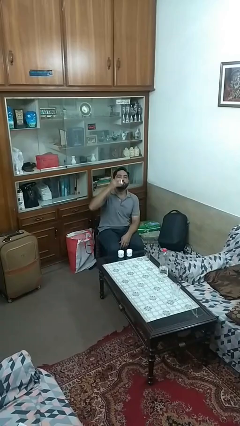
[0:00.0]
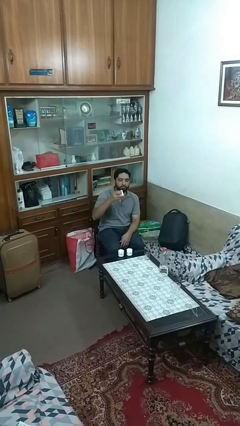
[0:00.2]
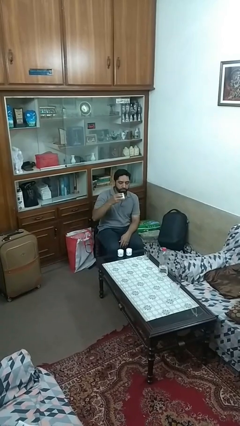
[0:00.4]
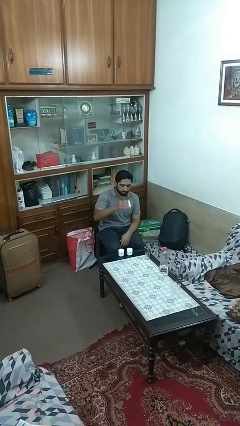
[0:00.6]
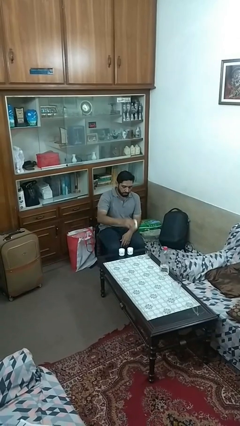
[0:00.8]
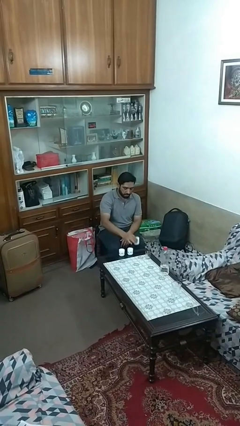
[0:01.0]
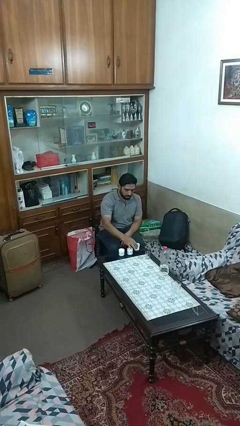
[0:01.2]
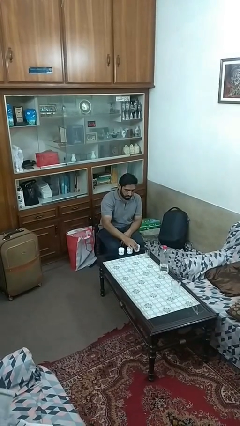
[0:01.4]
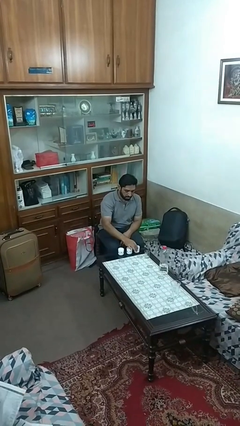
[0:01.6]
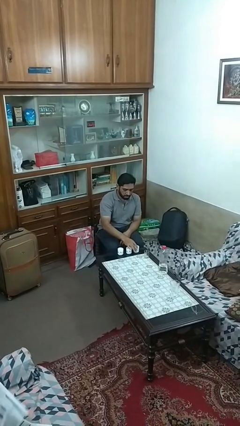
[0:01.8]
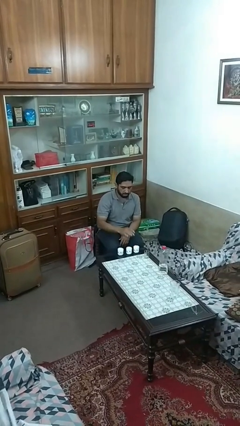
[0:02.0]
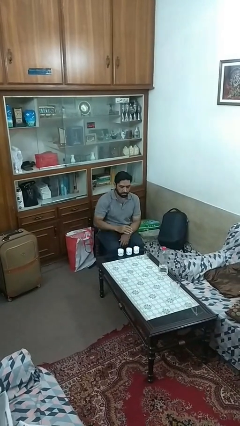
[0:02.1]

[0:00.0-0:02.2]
person puts down object on table

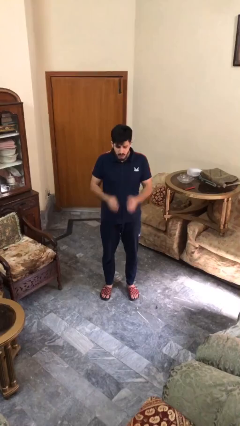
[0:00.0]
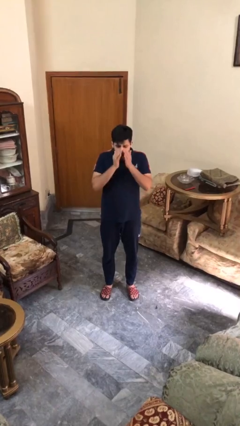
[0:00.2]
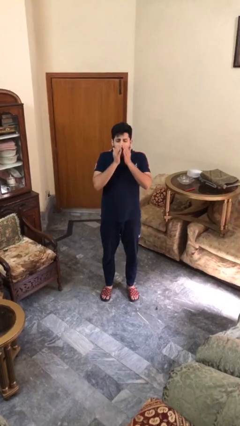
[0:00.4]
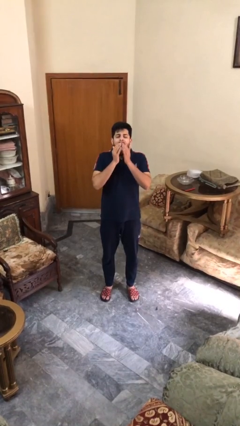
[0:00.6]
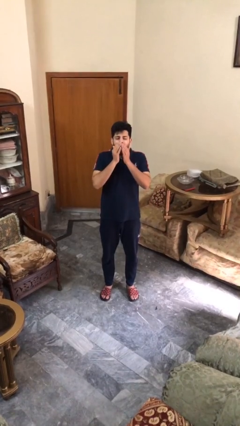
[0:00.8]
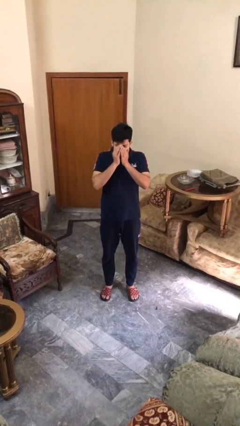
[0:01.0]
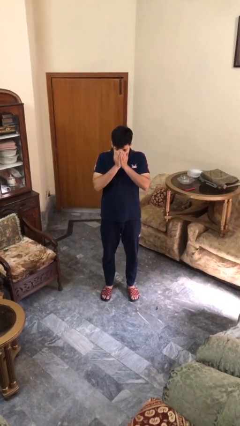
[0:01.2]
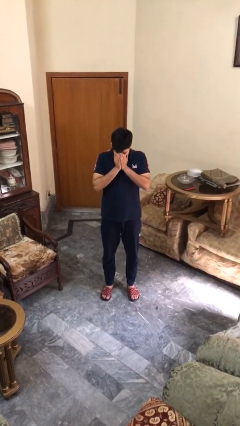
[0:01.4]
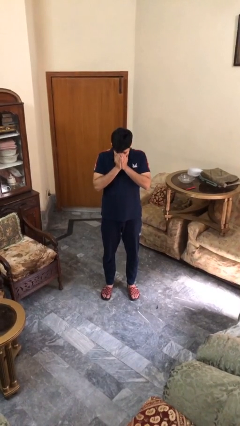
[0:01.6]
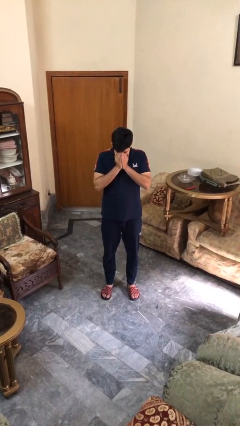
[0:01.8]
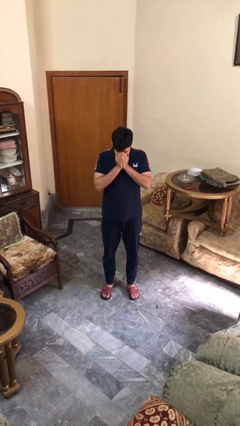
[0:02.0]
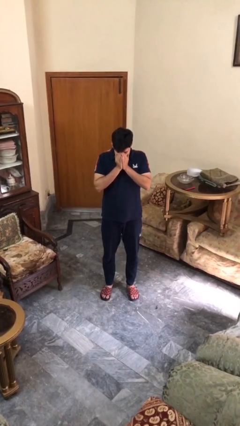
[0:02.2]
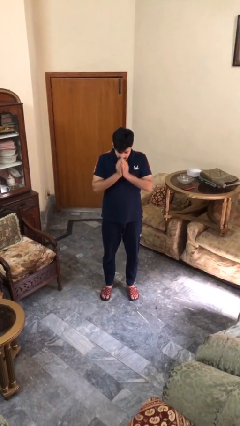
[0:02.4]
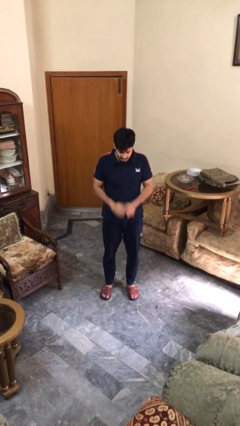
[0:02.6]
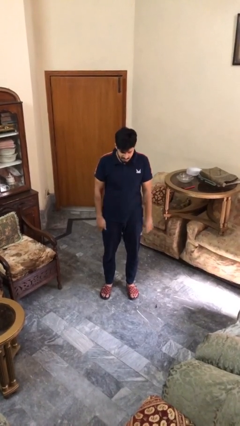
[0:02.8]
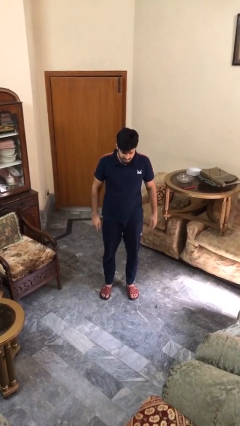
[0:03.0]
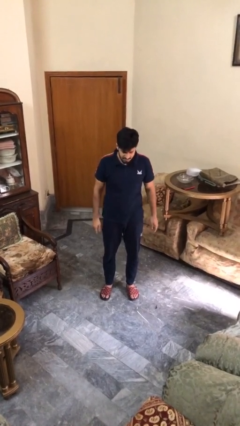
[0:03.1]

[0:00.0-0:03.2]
person sneezes into hand

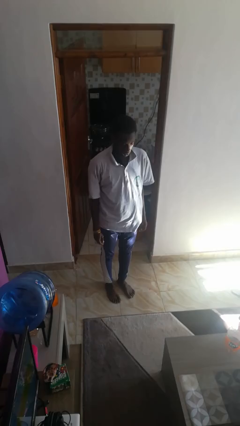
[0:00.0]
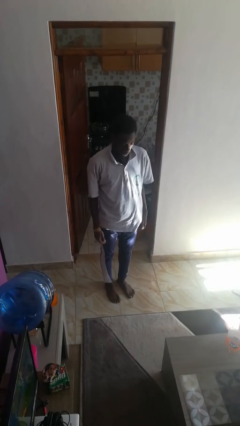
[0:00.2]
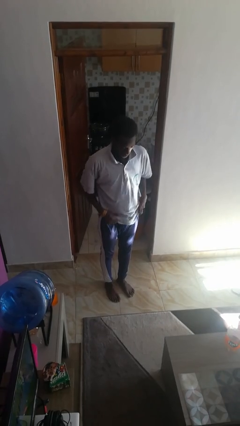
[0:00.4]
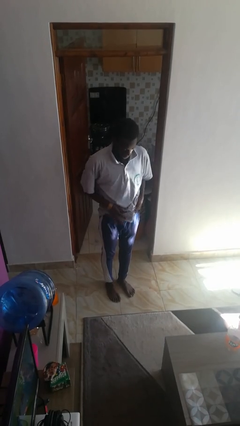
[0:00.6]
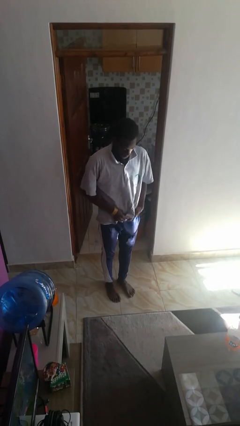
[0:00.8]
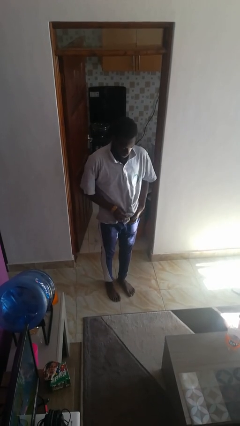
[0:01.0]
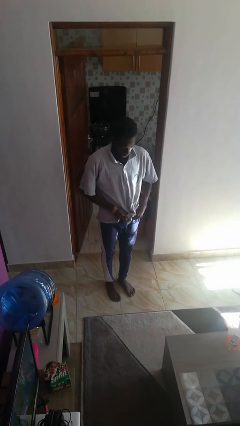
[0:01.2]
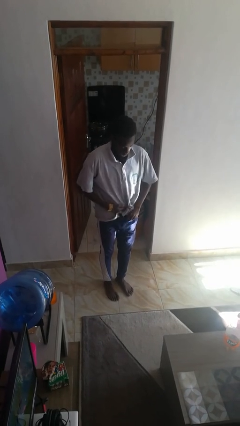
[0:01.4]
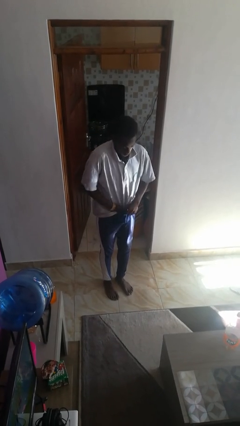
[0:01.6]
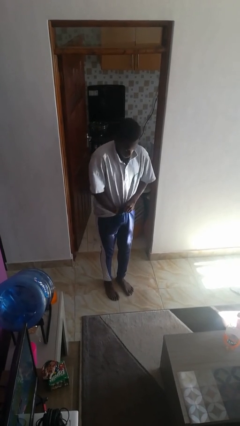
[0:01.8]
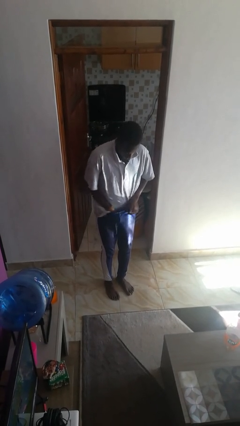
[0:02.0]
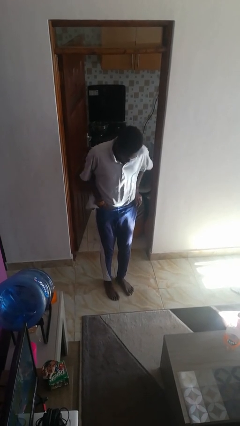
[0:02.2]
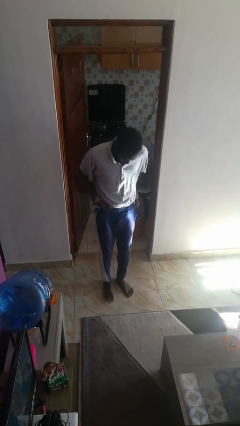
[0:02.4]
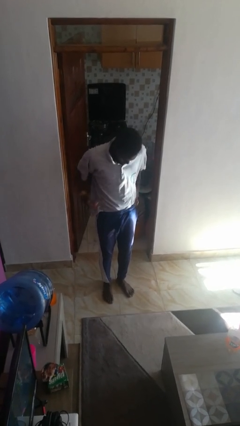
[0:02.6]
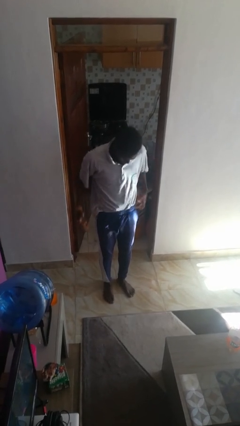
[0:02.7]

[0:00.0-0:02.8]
person tucks in shirt

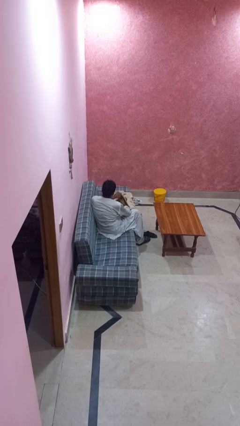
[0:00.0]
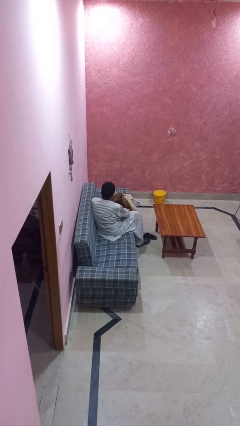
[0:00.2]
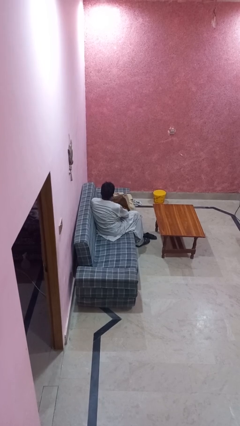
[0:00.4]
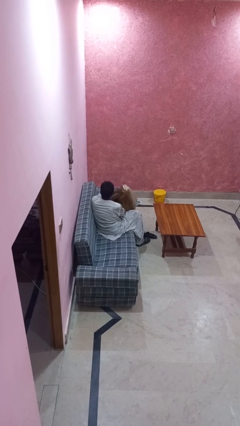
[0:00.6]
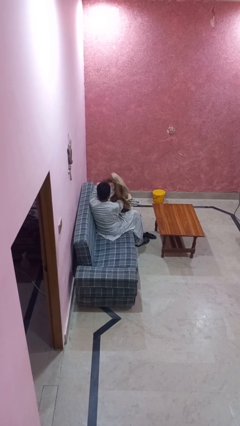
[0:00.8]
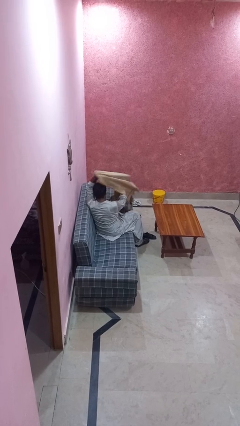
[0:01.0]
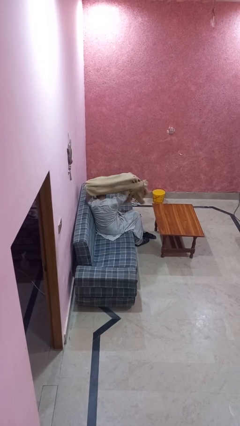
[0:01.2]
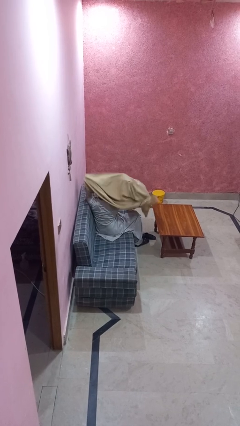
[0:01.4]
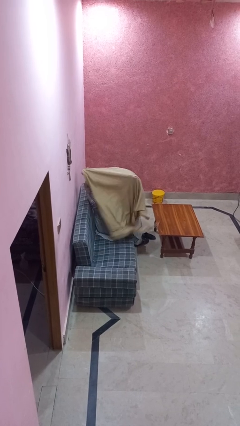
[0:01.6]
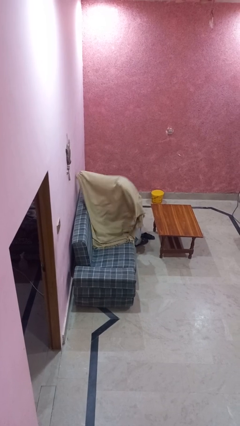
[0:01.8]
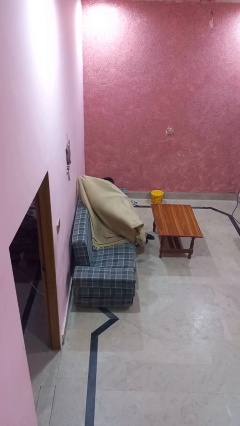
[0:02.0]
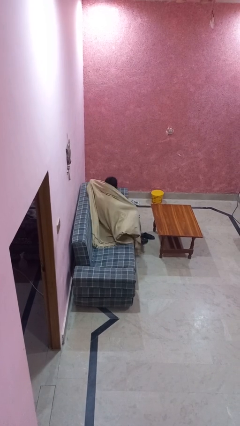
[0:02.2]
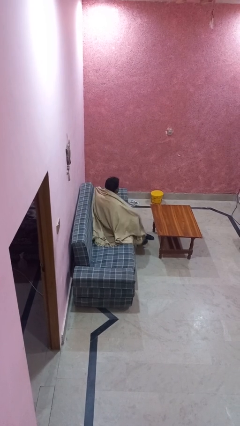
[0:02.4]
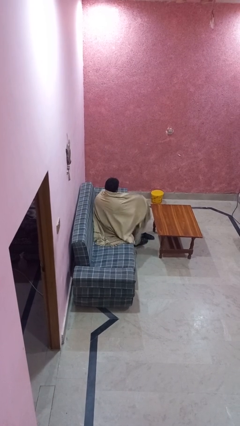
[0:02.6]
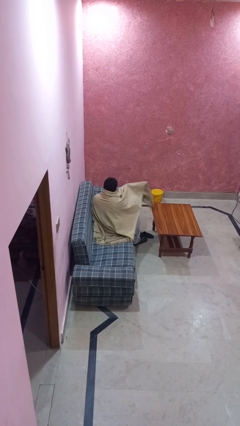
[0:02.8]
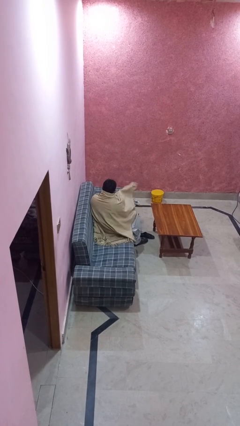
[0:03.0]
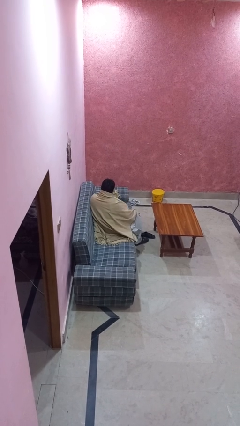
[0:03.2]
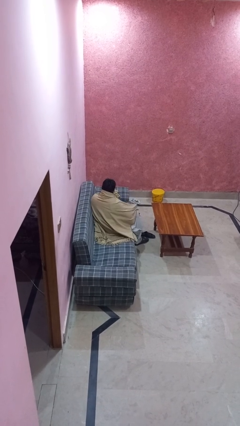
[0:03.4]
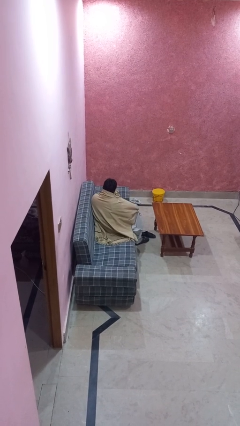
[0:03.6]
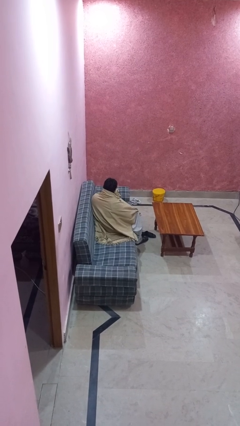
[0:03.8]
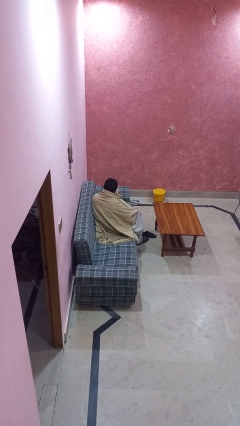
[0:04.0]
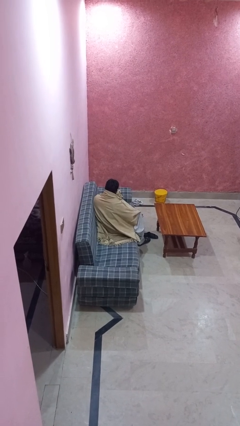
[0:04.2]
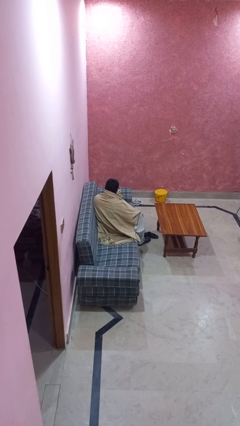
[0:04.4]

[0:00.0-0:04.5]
person covers with blanket

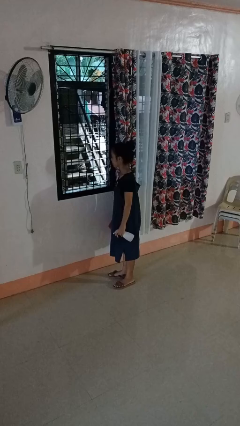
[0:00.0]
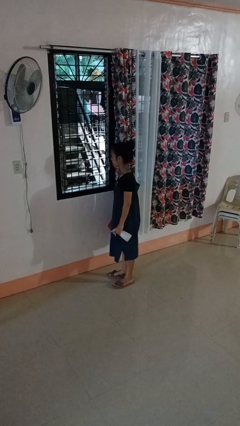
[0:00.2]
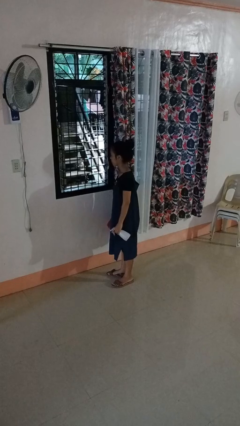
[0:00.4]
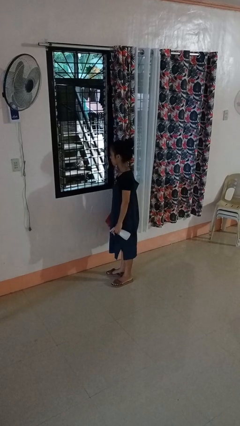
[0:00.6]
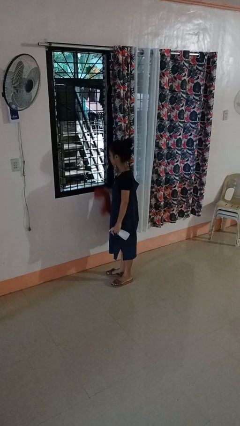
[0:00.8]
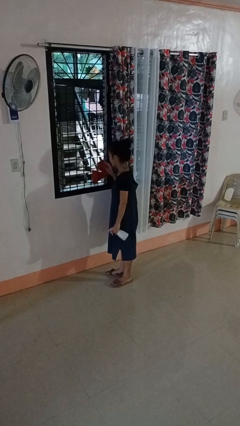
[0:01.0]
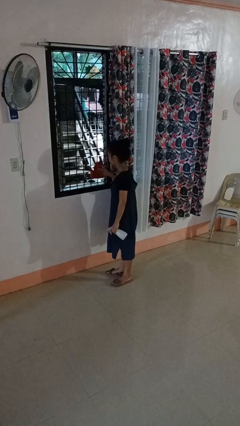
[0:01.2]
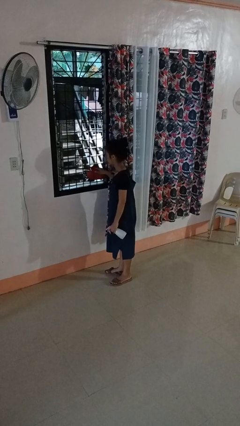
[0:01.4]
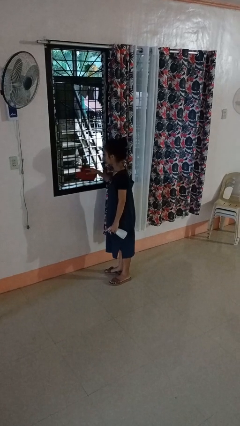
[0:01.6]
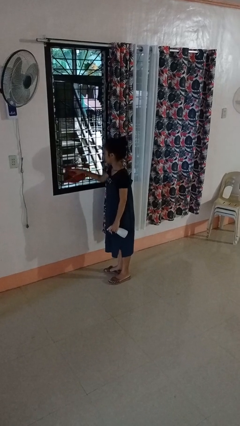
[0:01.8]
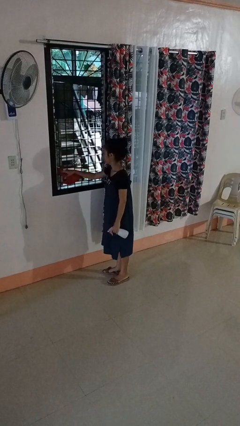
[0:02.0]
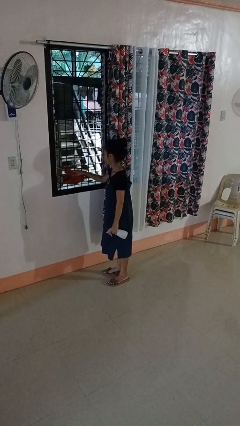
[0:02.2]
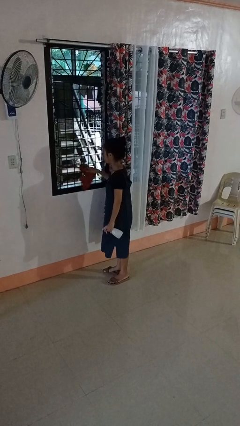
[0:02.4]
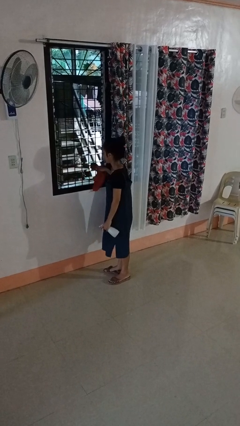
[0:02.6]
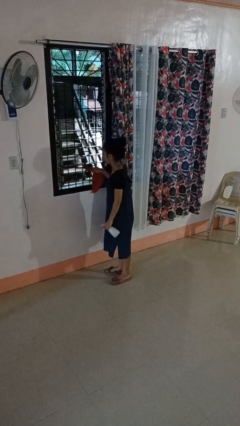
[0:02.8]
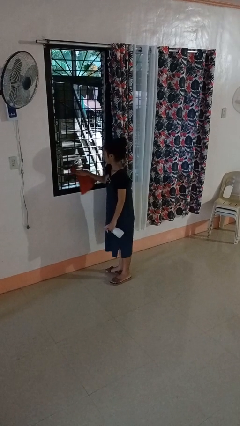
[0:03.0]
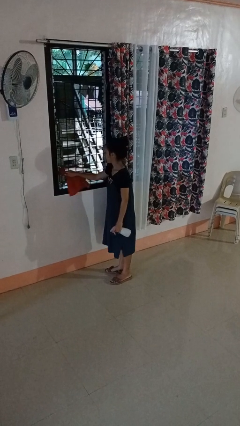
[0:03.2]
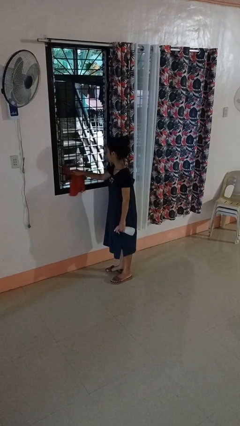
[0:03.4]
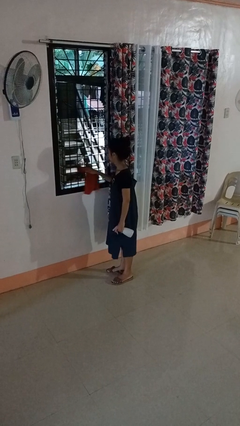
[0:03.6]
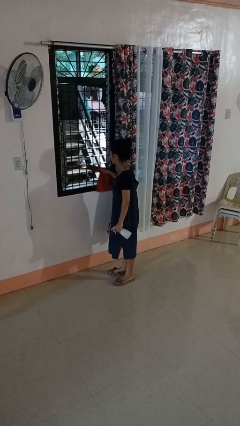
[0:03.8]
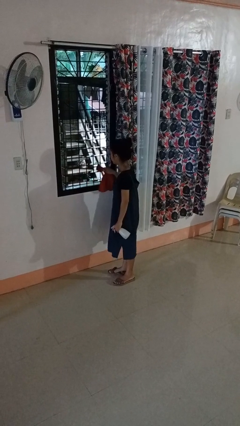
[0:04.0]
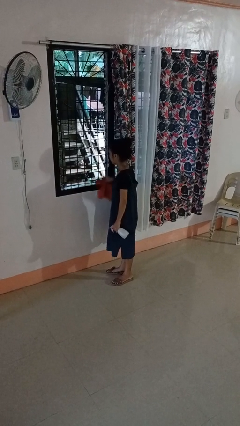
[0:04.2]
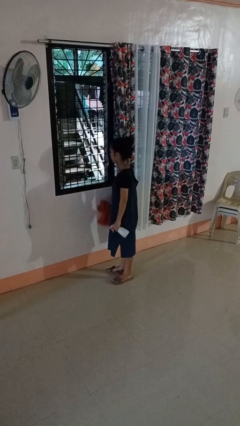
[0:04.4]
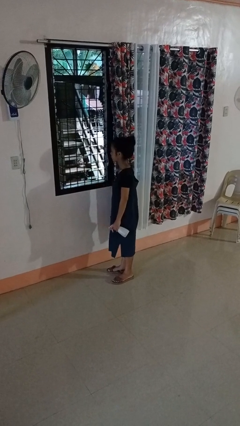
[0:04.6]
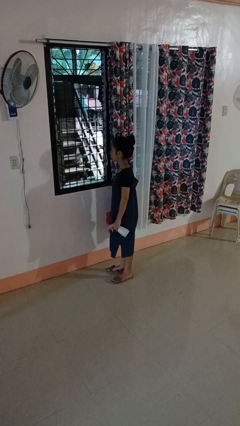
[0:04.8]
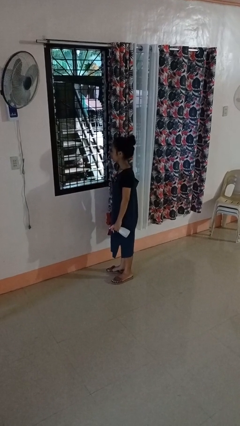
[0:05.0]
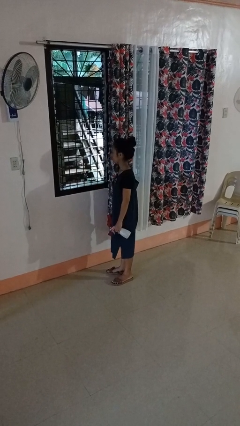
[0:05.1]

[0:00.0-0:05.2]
person washes window
